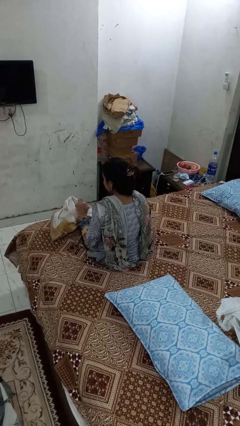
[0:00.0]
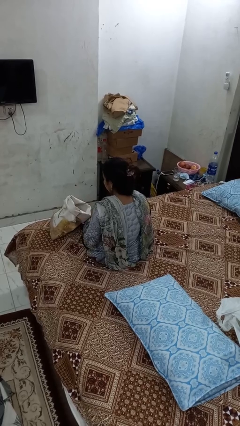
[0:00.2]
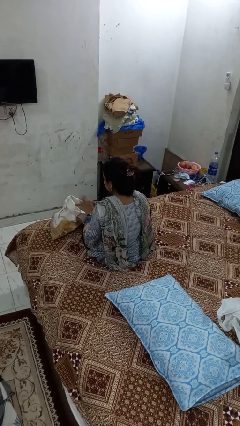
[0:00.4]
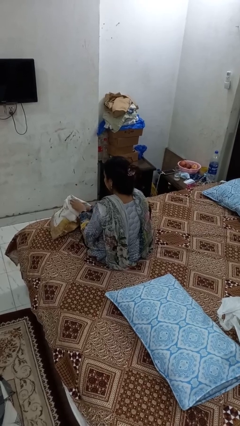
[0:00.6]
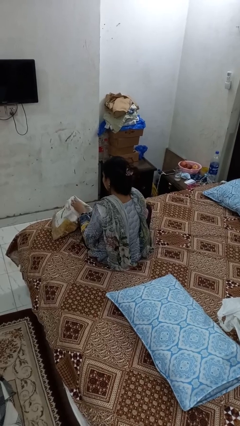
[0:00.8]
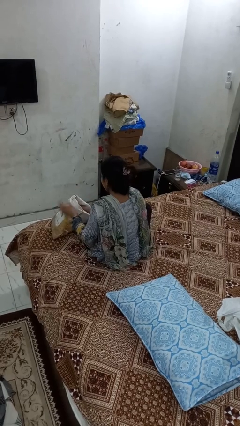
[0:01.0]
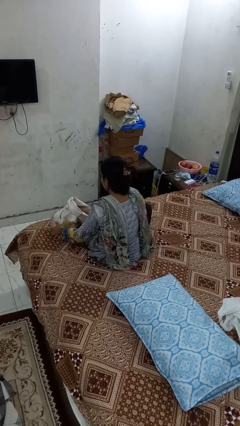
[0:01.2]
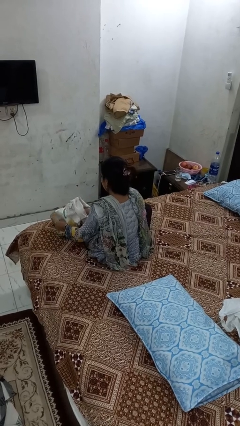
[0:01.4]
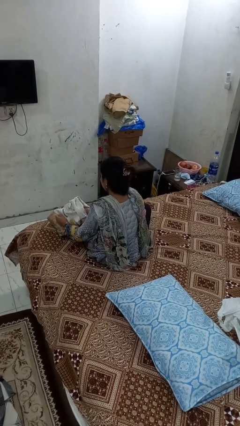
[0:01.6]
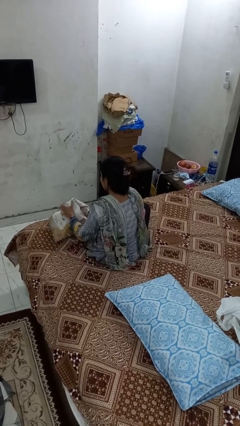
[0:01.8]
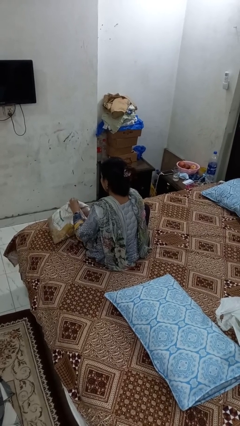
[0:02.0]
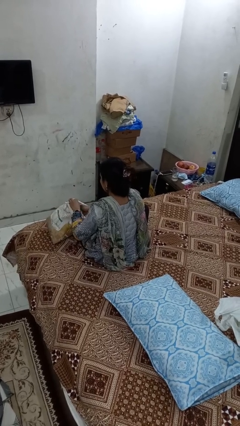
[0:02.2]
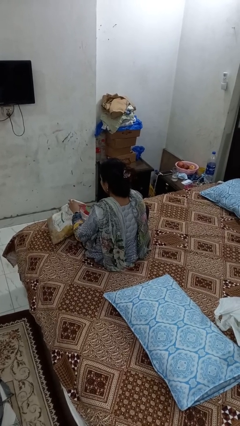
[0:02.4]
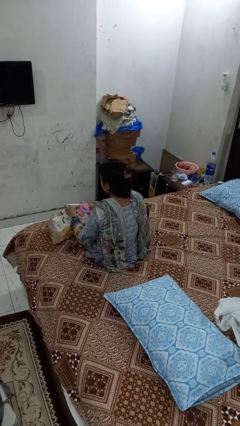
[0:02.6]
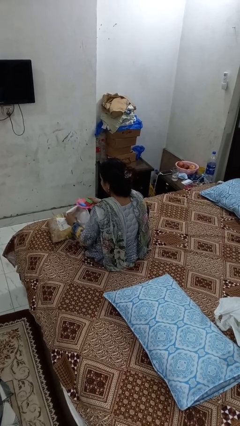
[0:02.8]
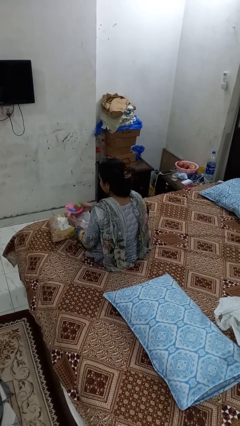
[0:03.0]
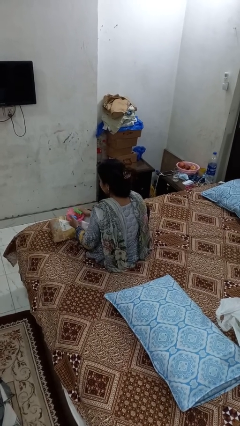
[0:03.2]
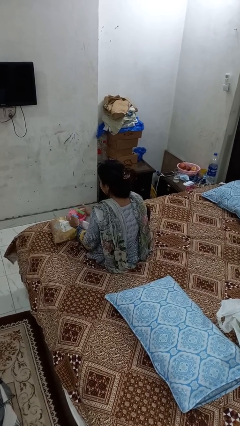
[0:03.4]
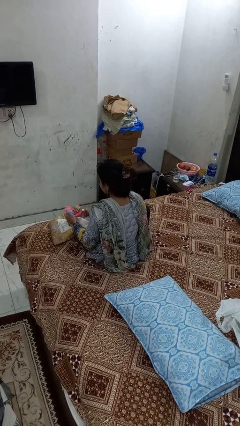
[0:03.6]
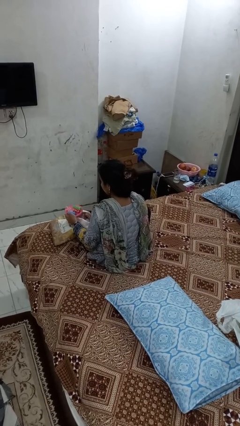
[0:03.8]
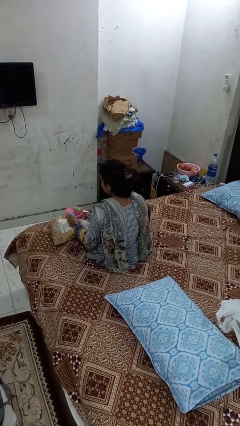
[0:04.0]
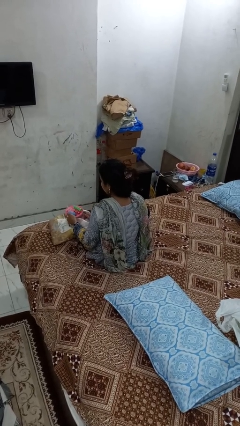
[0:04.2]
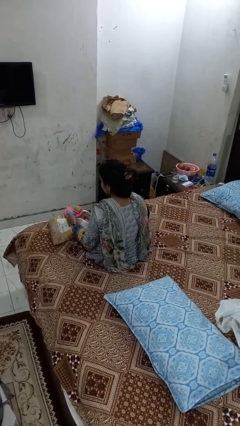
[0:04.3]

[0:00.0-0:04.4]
person takes object from bag

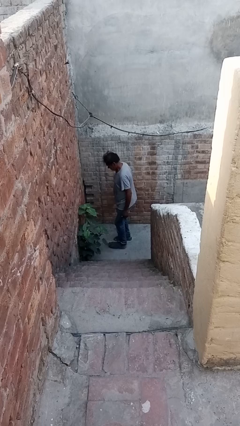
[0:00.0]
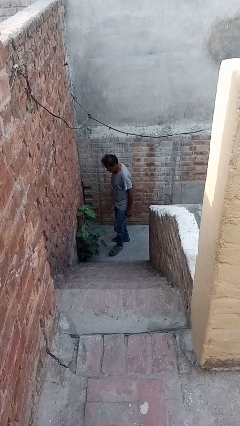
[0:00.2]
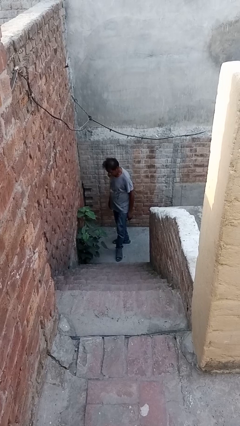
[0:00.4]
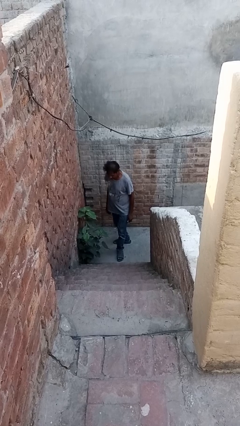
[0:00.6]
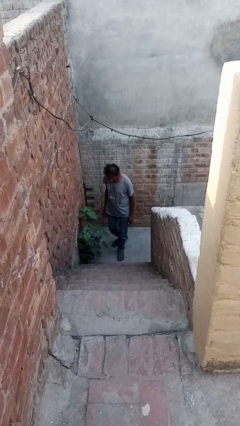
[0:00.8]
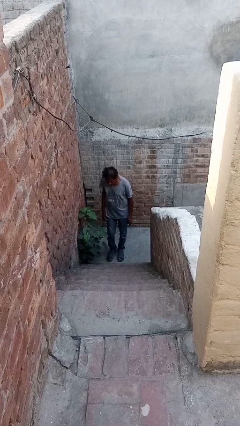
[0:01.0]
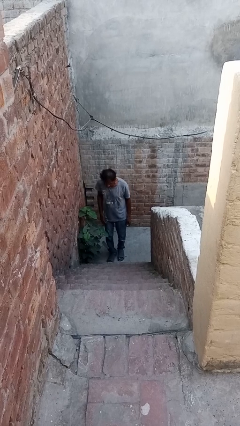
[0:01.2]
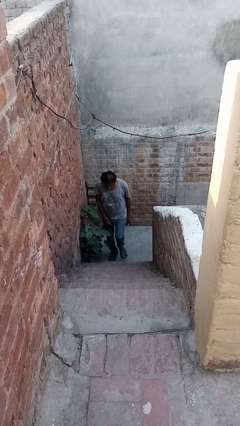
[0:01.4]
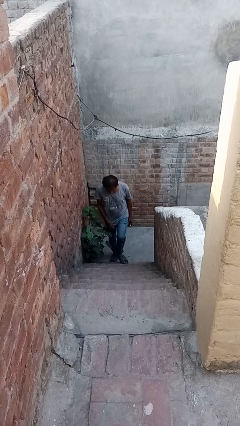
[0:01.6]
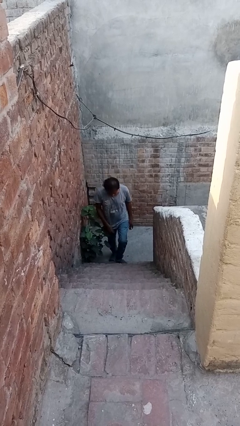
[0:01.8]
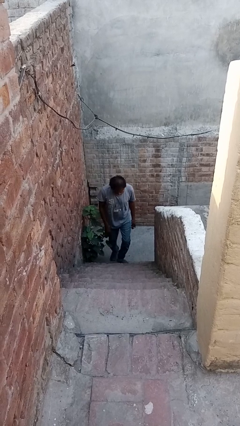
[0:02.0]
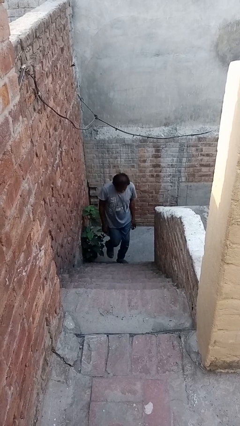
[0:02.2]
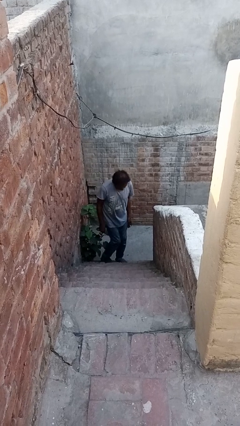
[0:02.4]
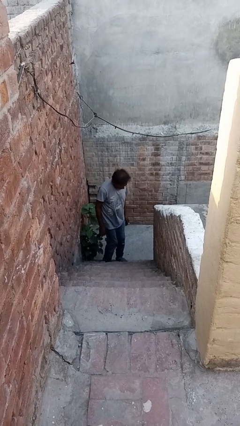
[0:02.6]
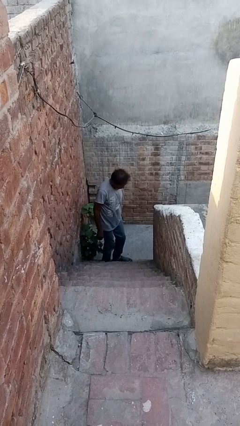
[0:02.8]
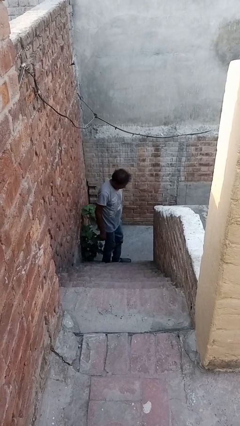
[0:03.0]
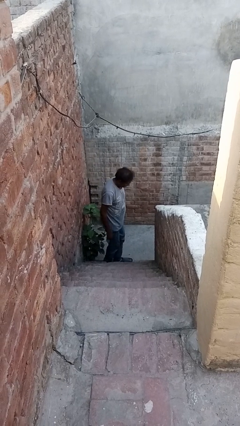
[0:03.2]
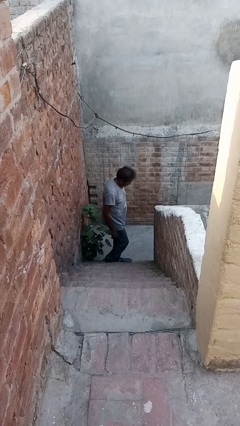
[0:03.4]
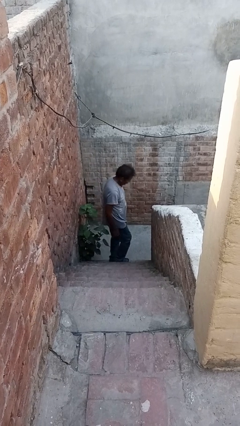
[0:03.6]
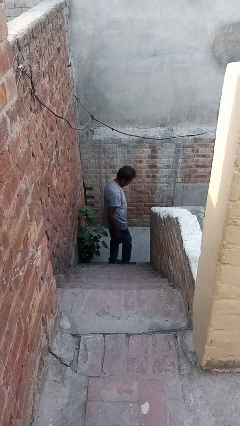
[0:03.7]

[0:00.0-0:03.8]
person climbs up stairs

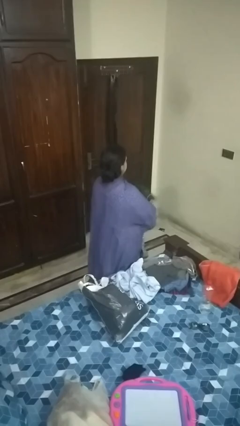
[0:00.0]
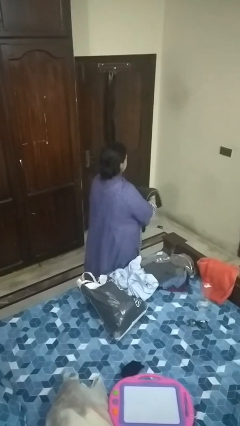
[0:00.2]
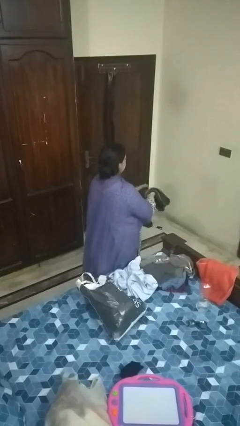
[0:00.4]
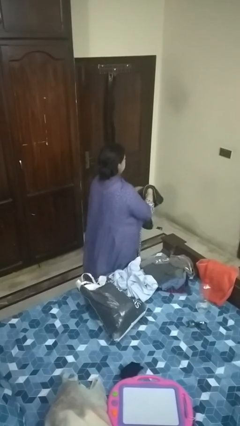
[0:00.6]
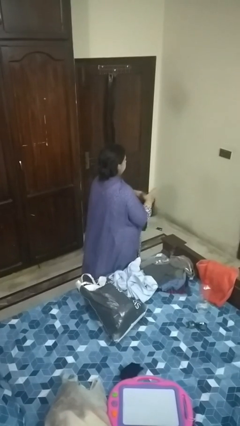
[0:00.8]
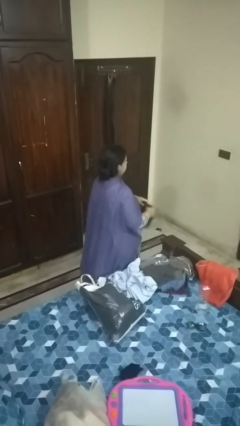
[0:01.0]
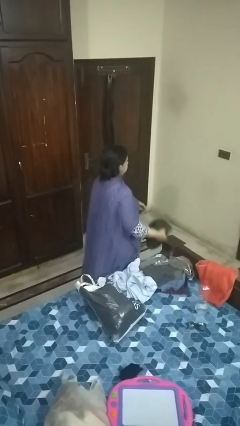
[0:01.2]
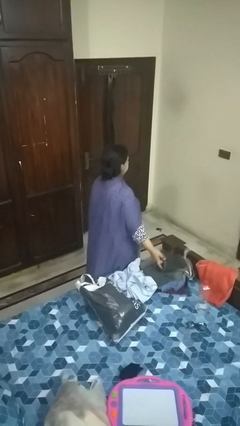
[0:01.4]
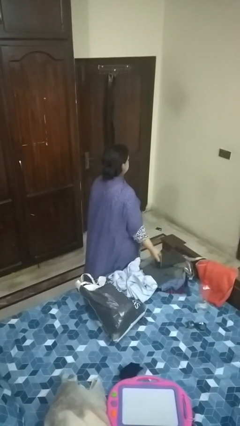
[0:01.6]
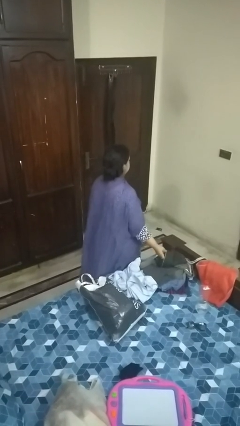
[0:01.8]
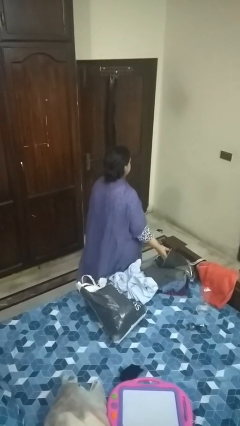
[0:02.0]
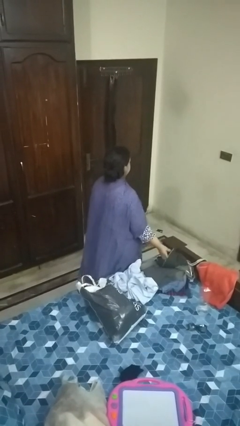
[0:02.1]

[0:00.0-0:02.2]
person folds pants

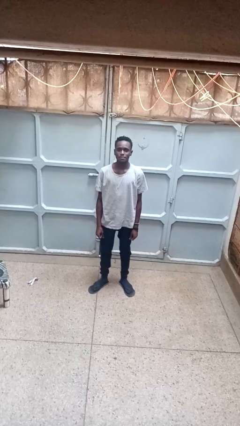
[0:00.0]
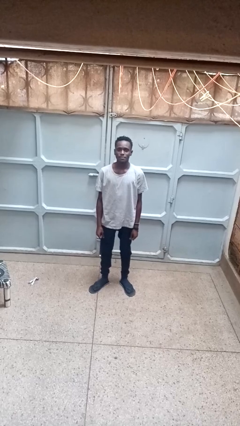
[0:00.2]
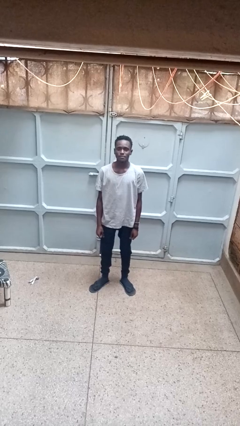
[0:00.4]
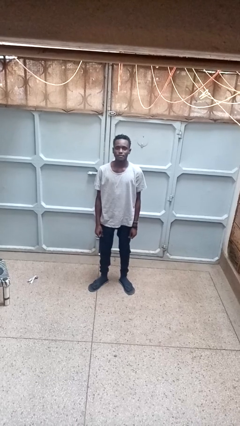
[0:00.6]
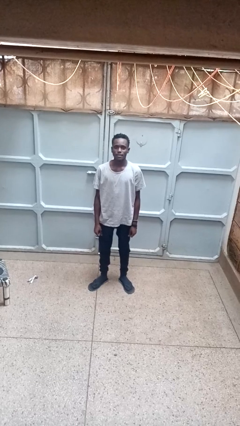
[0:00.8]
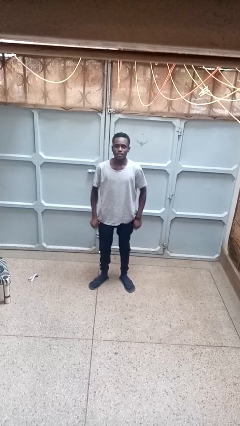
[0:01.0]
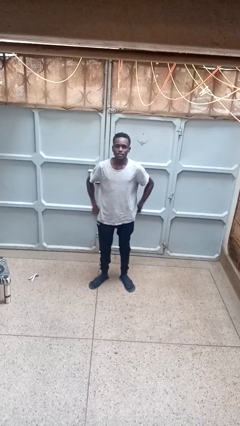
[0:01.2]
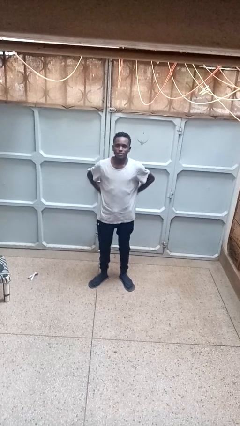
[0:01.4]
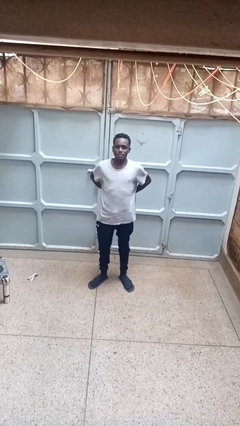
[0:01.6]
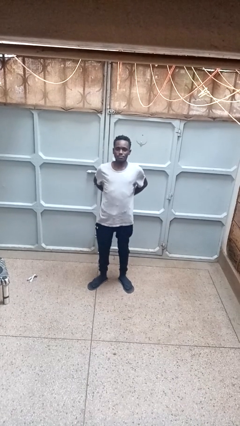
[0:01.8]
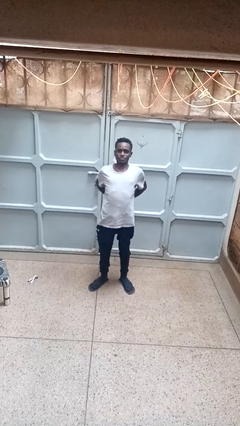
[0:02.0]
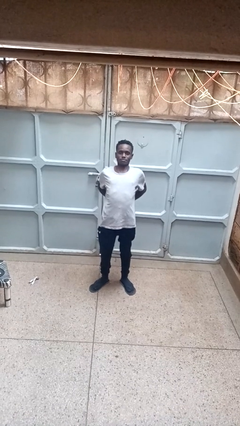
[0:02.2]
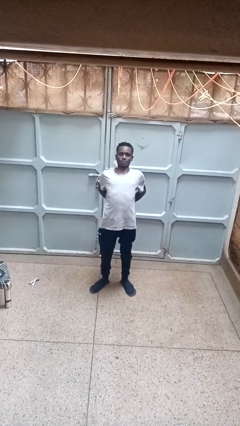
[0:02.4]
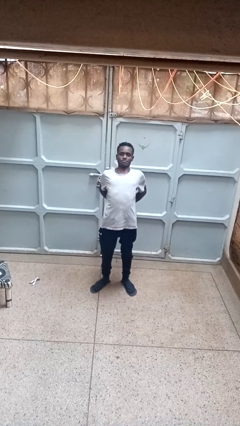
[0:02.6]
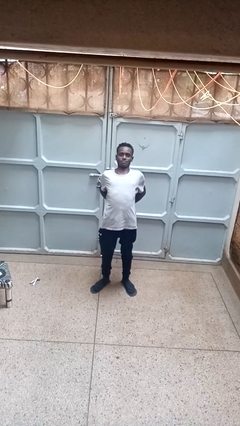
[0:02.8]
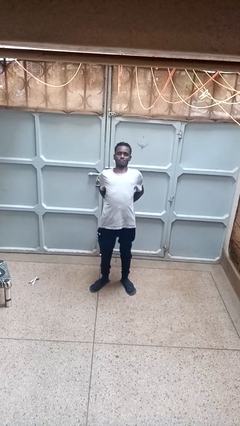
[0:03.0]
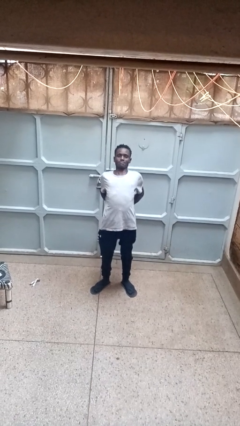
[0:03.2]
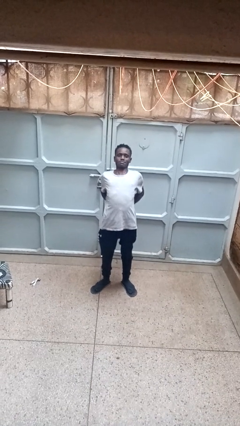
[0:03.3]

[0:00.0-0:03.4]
person stretches back

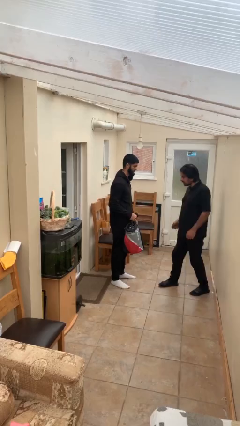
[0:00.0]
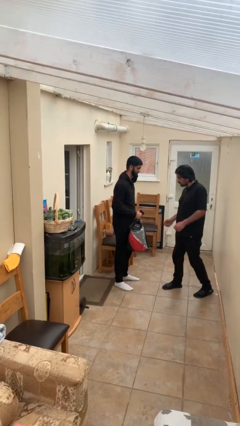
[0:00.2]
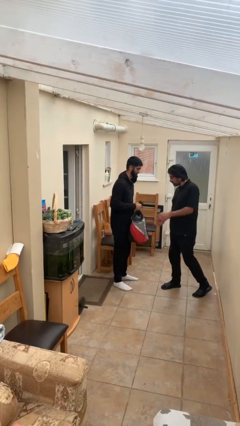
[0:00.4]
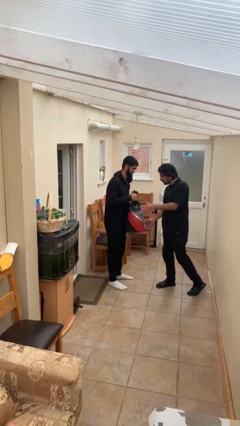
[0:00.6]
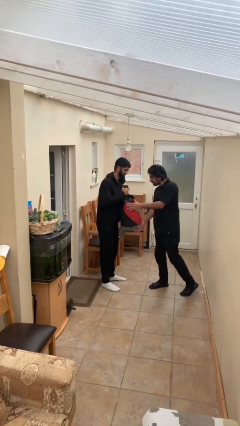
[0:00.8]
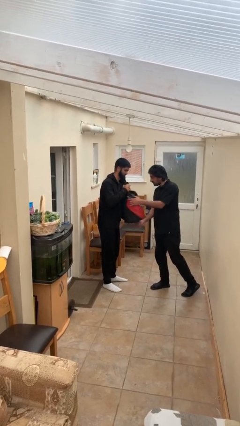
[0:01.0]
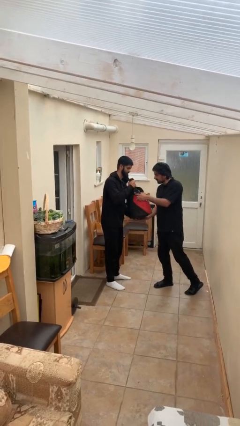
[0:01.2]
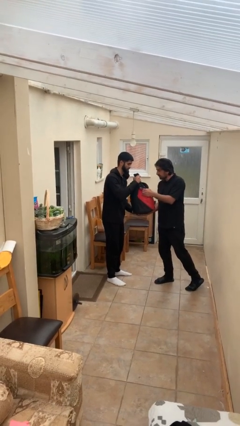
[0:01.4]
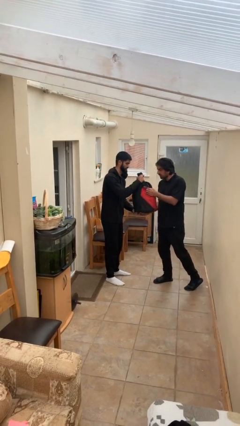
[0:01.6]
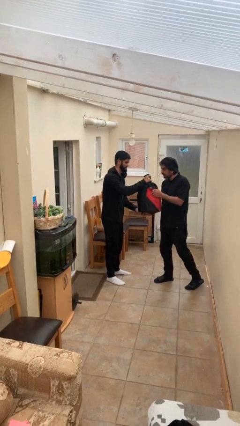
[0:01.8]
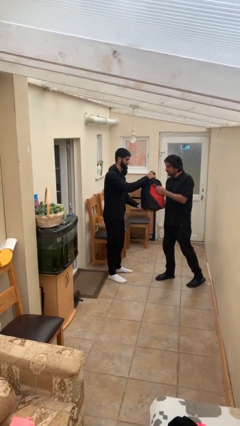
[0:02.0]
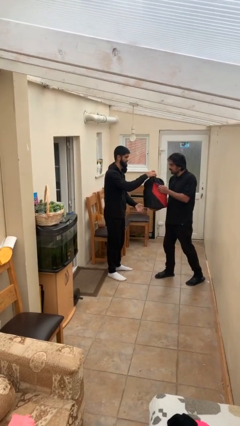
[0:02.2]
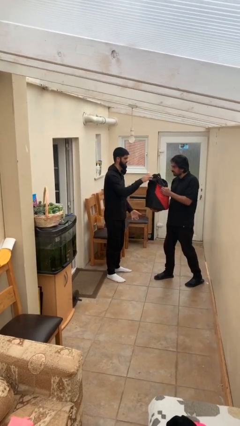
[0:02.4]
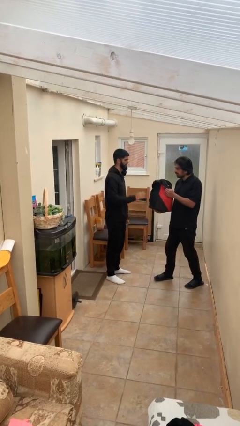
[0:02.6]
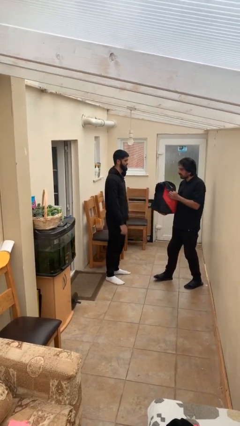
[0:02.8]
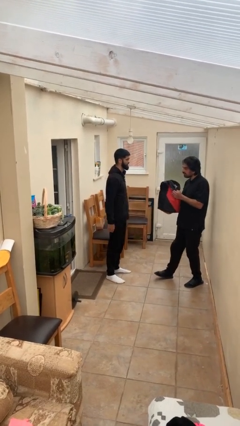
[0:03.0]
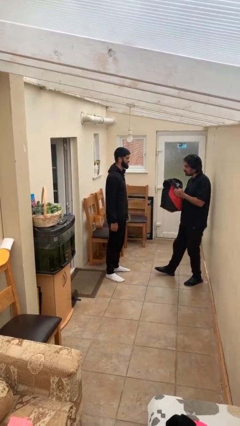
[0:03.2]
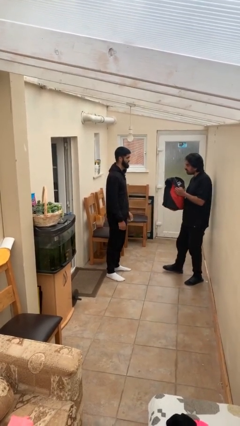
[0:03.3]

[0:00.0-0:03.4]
person transfers object to person

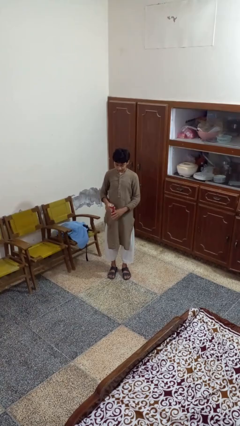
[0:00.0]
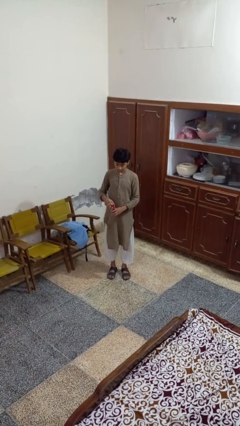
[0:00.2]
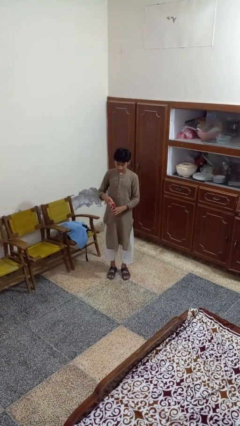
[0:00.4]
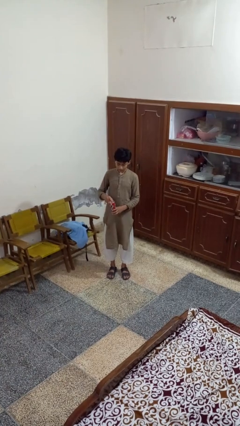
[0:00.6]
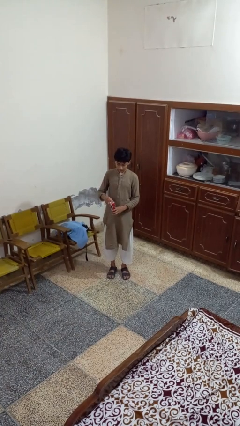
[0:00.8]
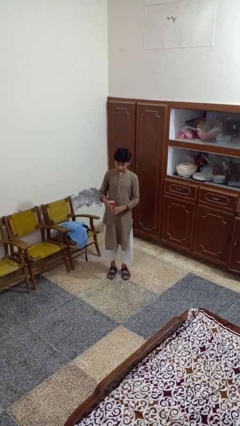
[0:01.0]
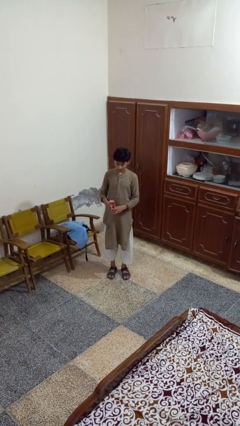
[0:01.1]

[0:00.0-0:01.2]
person opens beverage can
